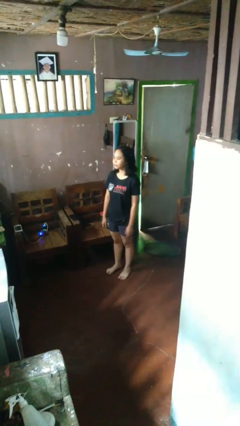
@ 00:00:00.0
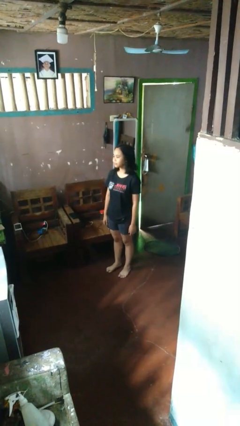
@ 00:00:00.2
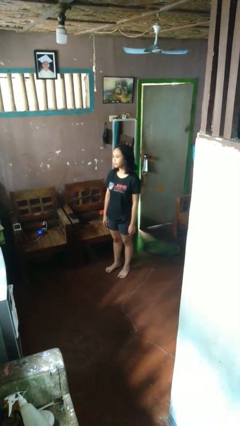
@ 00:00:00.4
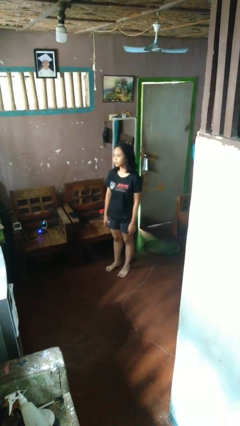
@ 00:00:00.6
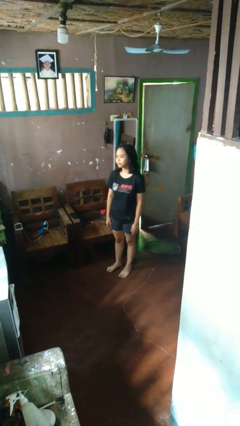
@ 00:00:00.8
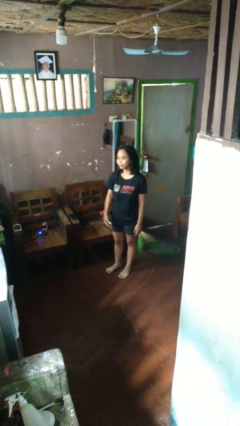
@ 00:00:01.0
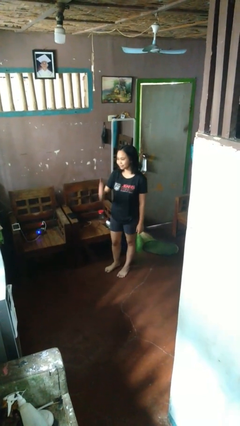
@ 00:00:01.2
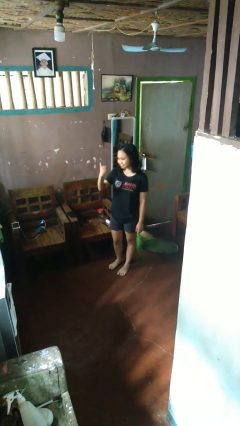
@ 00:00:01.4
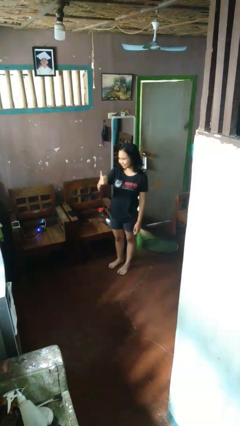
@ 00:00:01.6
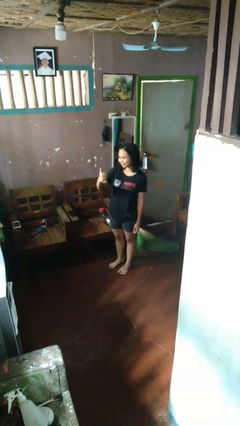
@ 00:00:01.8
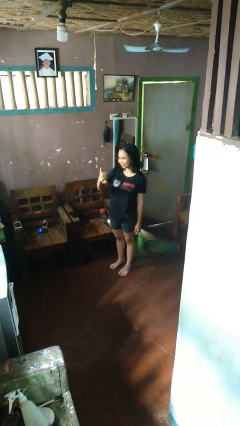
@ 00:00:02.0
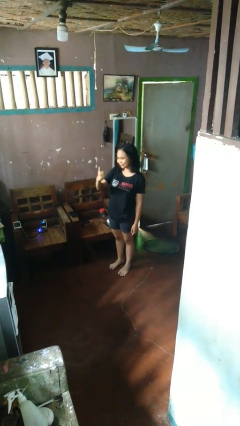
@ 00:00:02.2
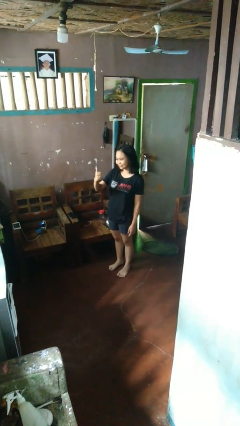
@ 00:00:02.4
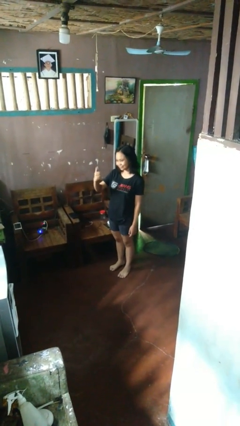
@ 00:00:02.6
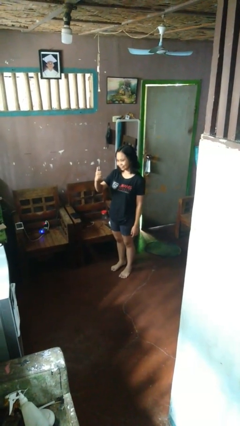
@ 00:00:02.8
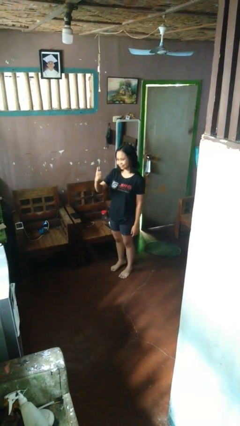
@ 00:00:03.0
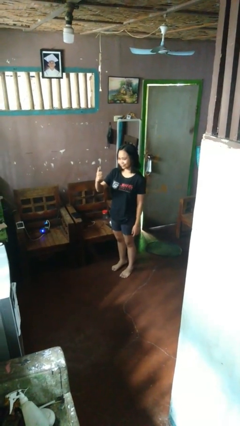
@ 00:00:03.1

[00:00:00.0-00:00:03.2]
person gestures thumbs up

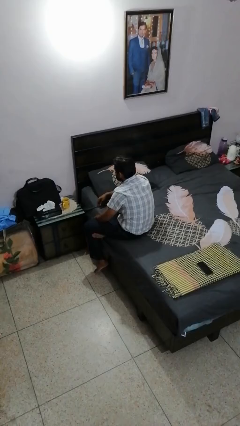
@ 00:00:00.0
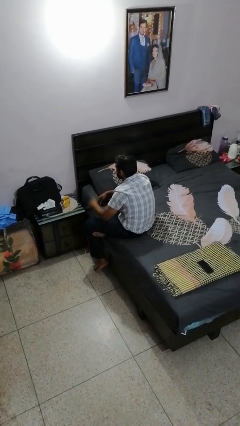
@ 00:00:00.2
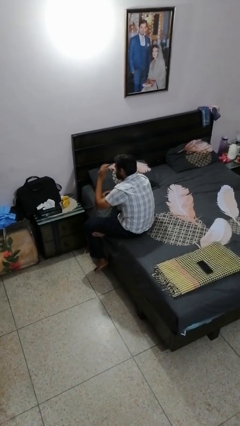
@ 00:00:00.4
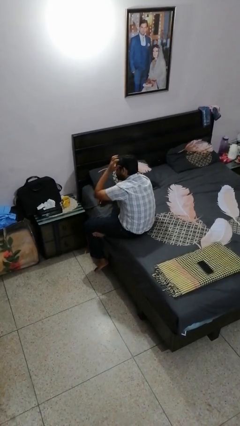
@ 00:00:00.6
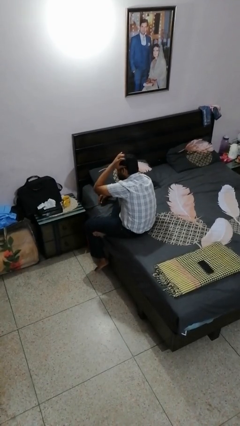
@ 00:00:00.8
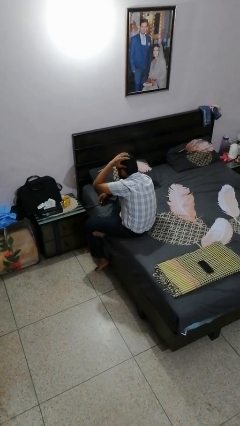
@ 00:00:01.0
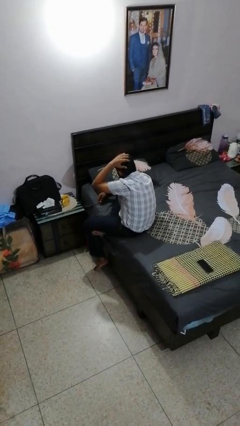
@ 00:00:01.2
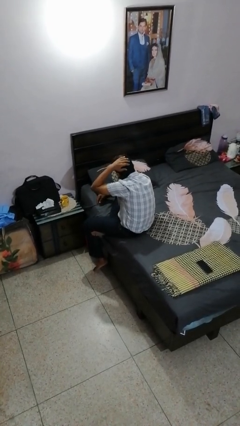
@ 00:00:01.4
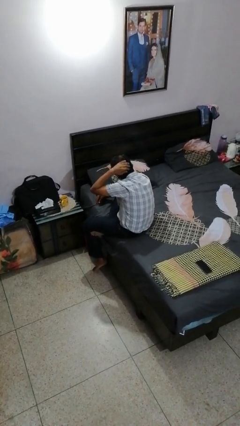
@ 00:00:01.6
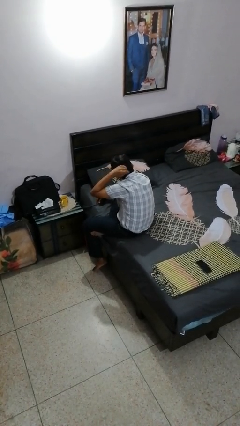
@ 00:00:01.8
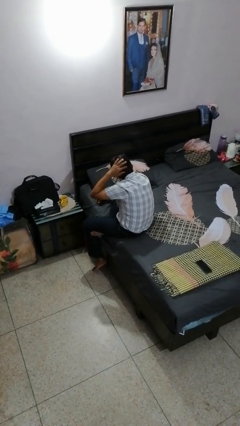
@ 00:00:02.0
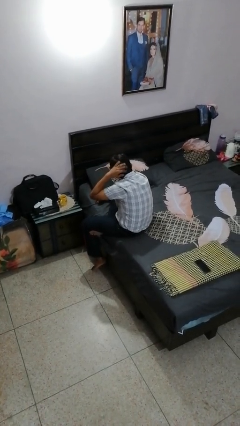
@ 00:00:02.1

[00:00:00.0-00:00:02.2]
person strokes hair

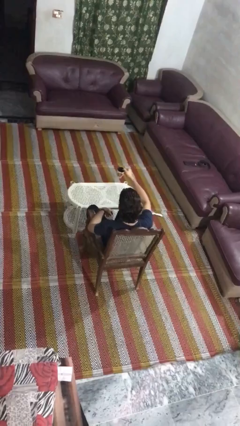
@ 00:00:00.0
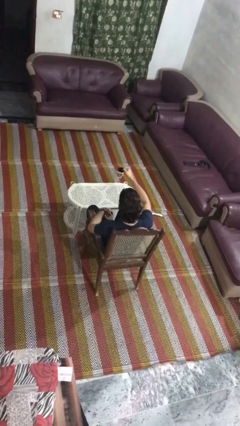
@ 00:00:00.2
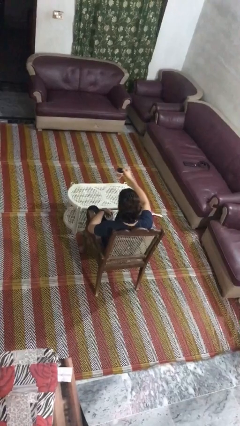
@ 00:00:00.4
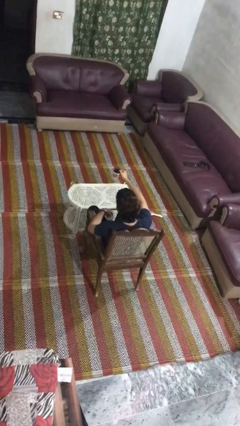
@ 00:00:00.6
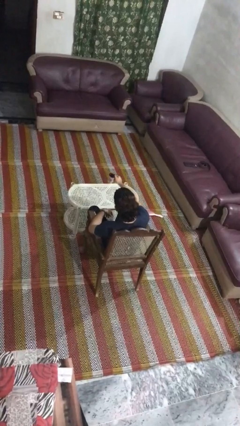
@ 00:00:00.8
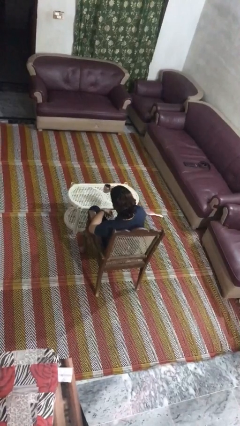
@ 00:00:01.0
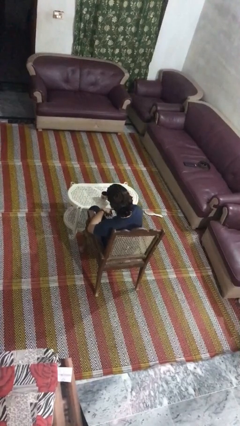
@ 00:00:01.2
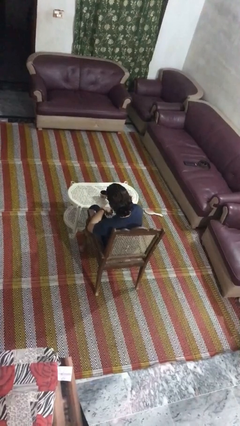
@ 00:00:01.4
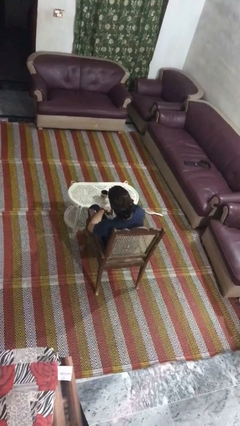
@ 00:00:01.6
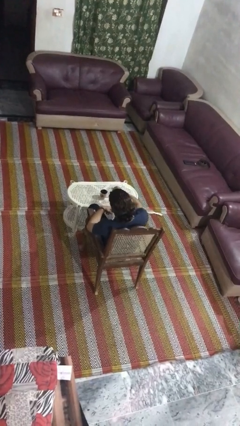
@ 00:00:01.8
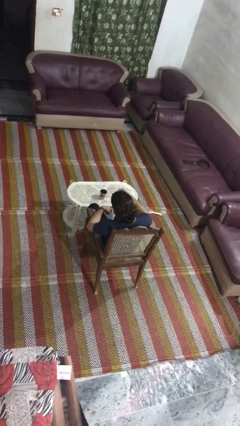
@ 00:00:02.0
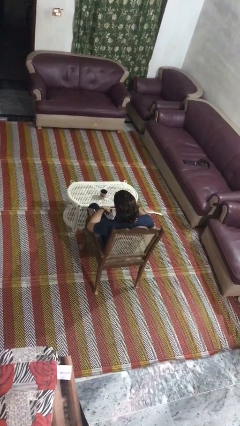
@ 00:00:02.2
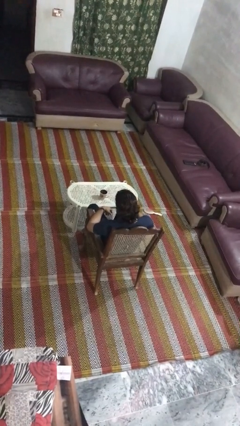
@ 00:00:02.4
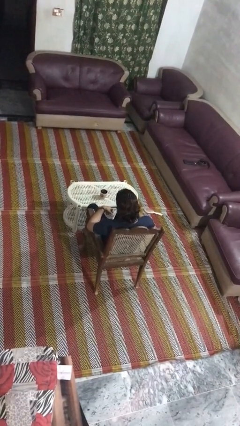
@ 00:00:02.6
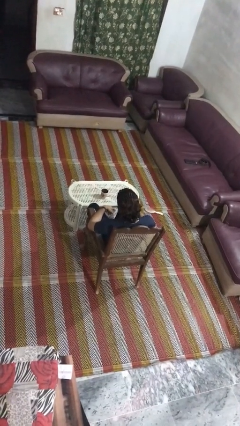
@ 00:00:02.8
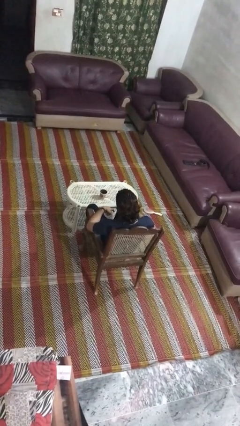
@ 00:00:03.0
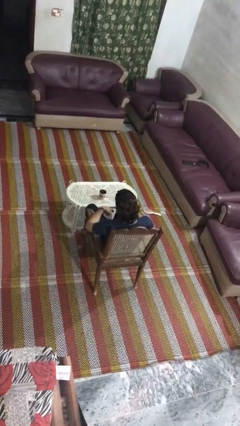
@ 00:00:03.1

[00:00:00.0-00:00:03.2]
person puts down object on table

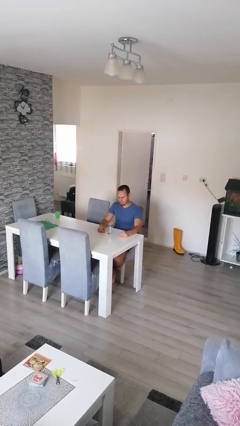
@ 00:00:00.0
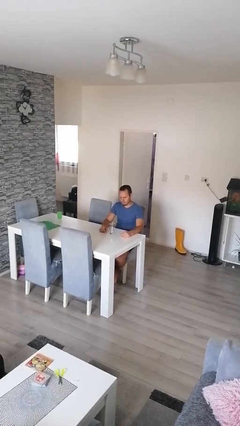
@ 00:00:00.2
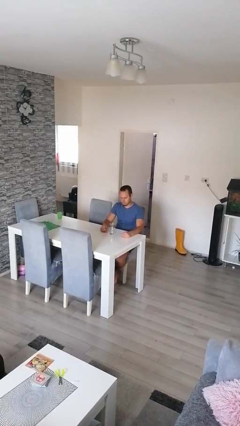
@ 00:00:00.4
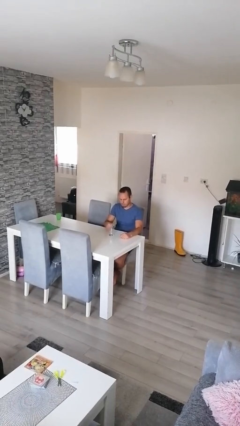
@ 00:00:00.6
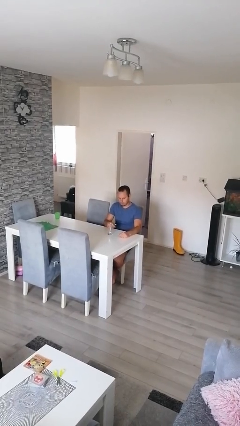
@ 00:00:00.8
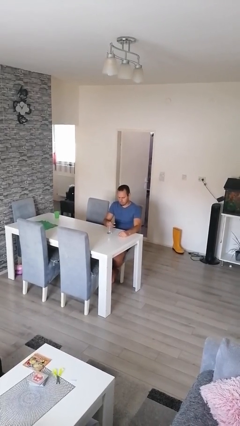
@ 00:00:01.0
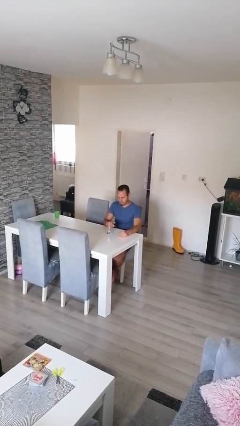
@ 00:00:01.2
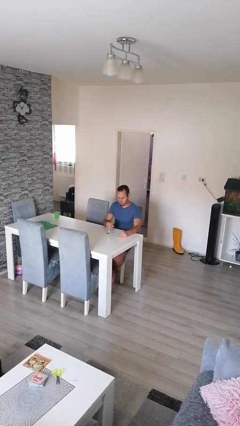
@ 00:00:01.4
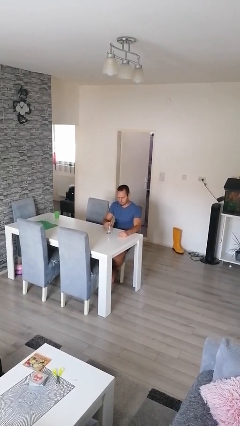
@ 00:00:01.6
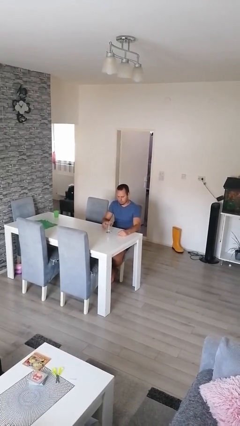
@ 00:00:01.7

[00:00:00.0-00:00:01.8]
person knocks over glass

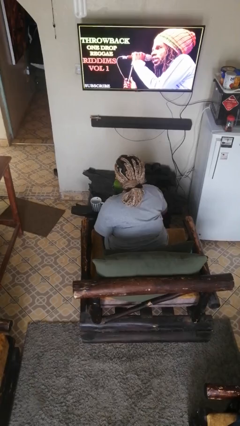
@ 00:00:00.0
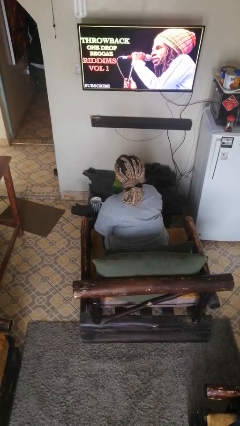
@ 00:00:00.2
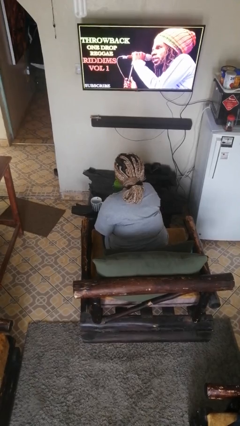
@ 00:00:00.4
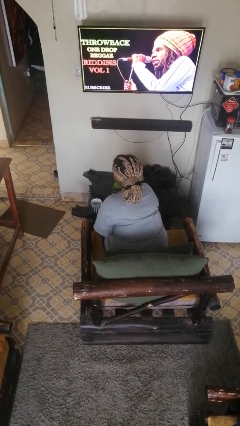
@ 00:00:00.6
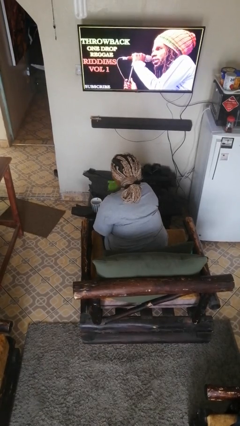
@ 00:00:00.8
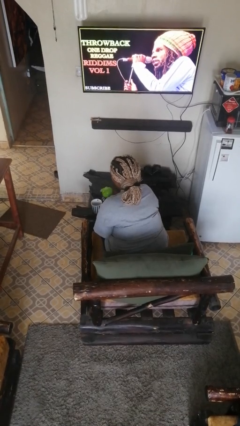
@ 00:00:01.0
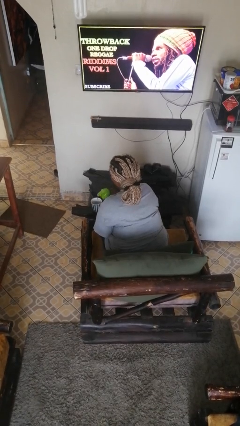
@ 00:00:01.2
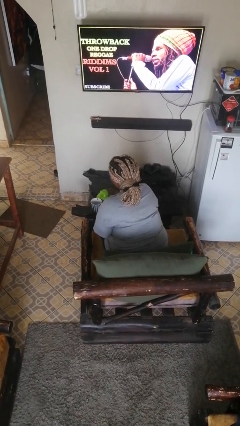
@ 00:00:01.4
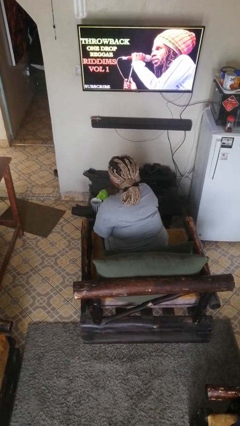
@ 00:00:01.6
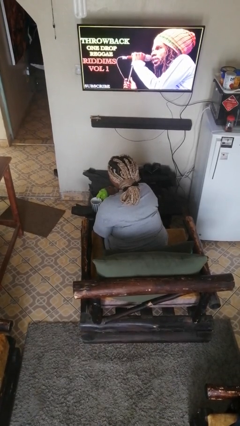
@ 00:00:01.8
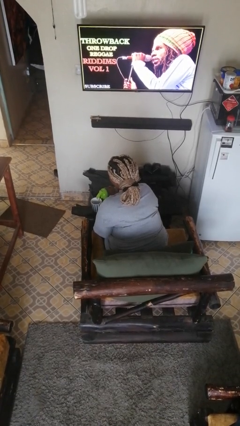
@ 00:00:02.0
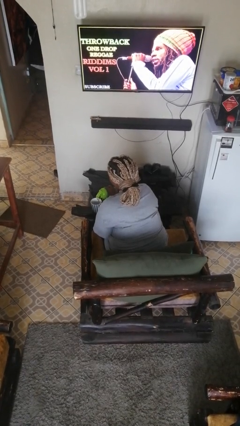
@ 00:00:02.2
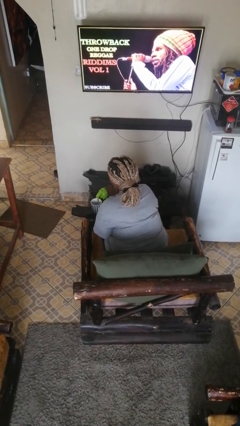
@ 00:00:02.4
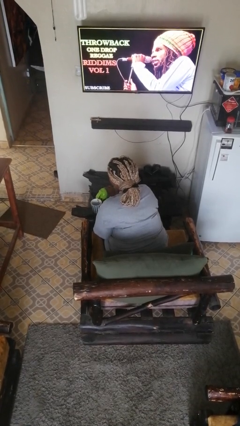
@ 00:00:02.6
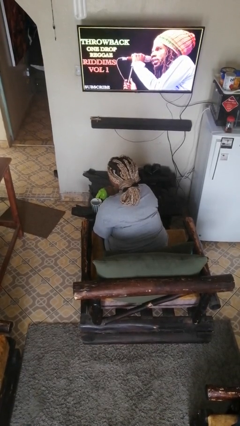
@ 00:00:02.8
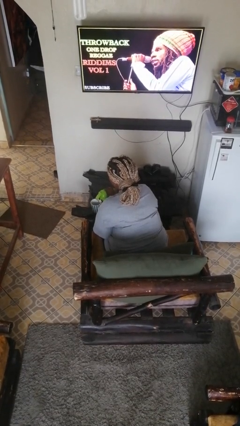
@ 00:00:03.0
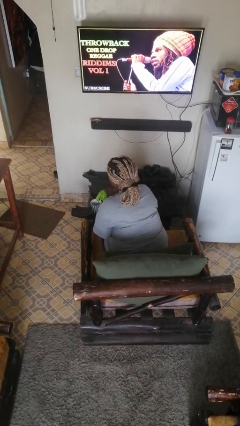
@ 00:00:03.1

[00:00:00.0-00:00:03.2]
person pours coffee into mug

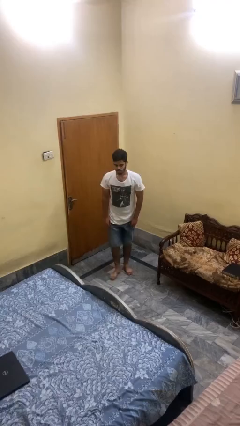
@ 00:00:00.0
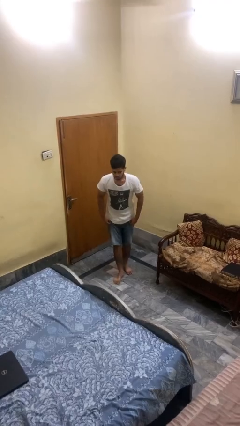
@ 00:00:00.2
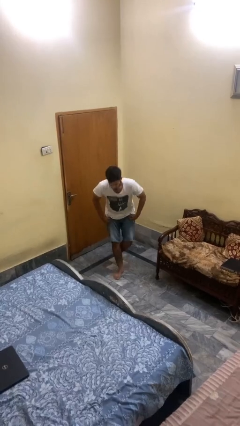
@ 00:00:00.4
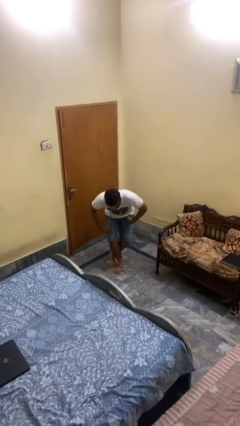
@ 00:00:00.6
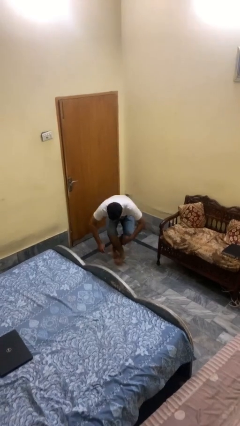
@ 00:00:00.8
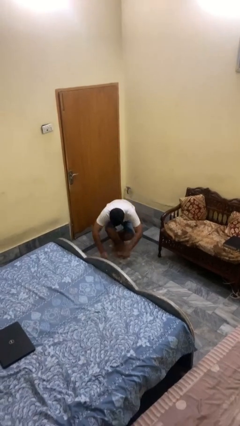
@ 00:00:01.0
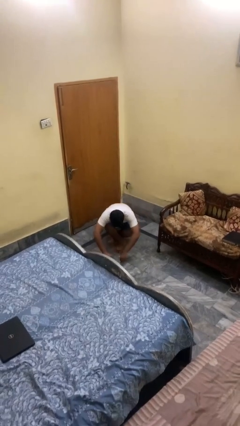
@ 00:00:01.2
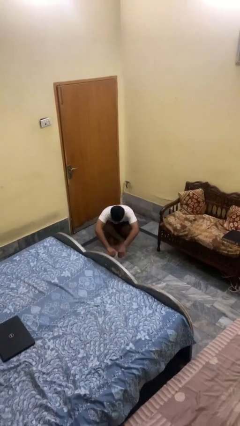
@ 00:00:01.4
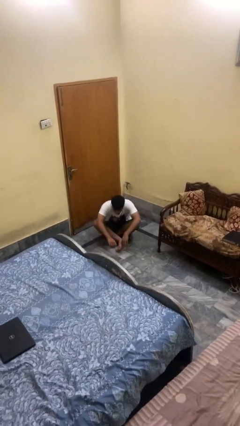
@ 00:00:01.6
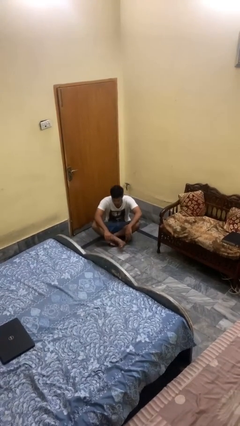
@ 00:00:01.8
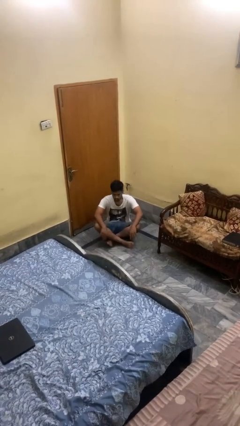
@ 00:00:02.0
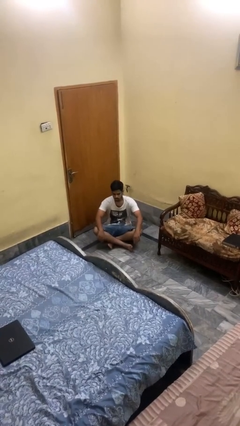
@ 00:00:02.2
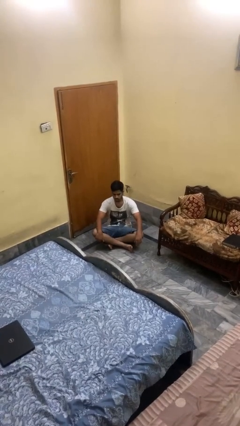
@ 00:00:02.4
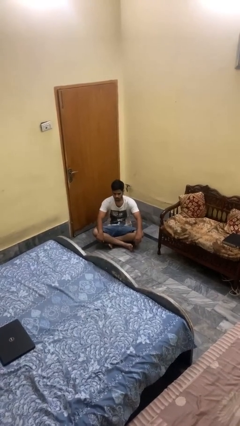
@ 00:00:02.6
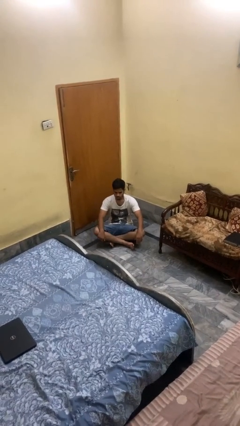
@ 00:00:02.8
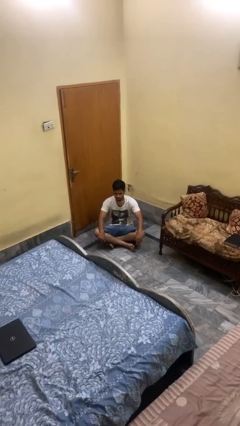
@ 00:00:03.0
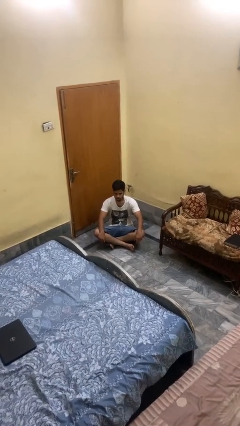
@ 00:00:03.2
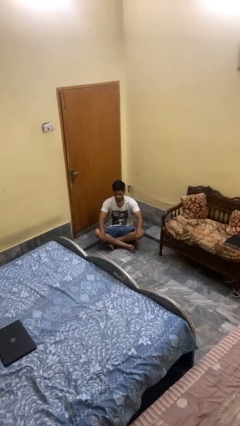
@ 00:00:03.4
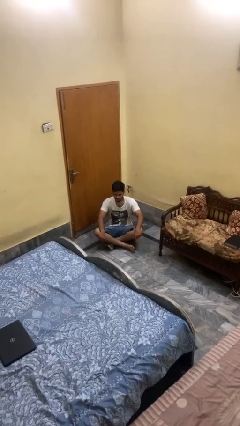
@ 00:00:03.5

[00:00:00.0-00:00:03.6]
person sits crisscross
